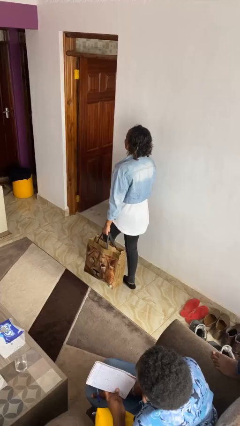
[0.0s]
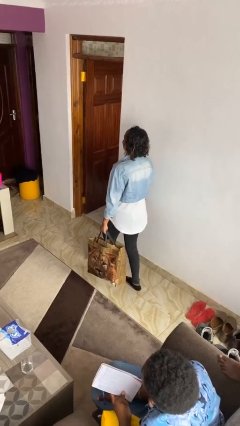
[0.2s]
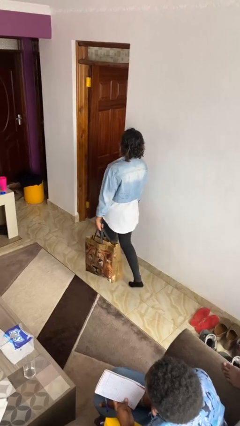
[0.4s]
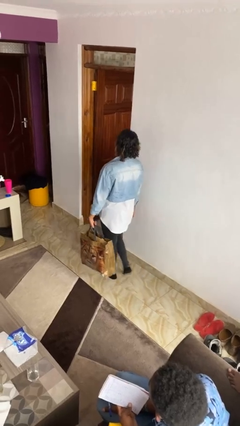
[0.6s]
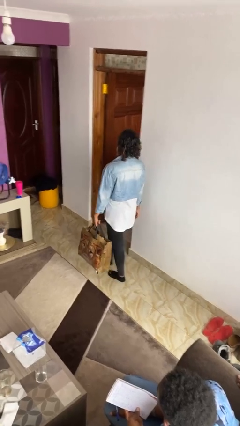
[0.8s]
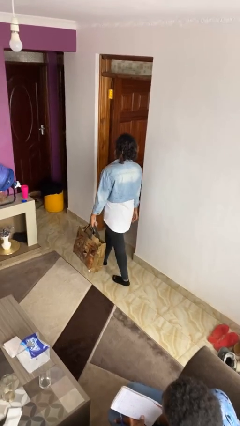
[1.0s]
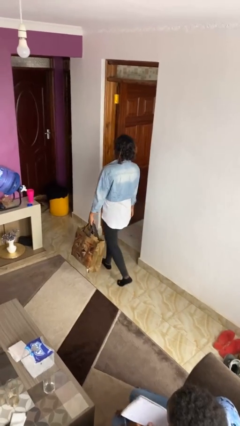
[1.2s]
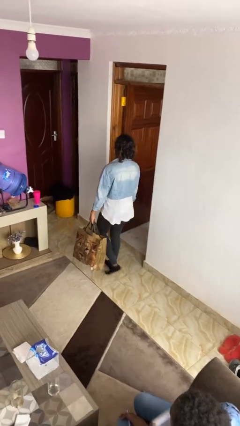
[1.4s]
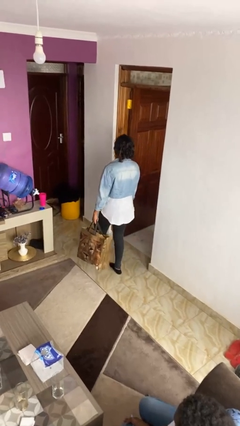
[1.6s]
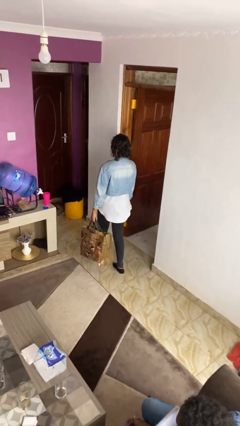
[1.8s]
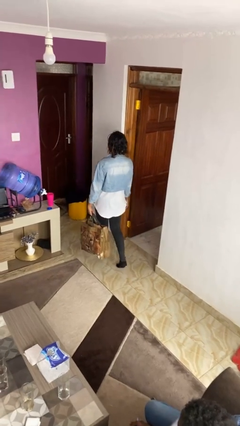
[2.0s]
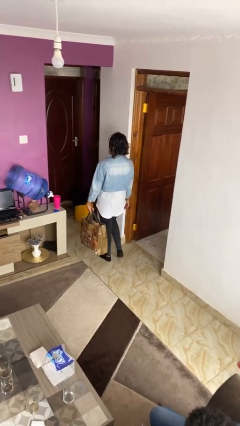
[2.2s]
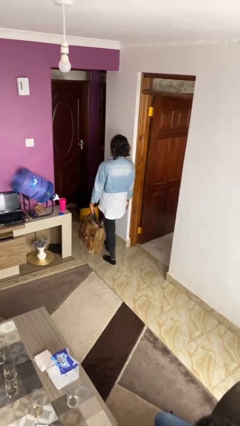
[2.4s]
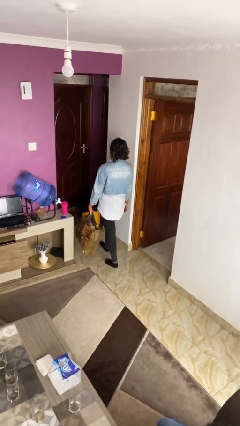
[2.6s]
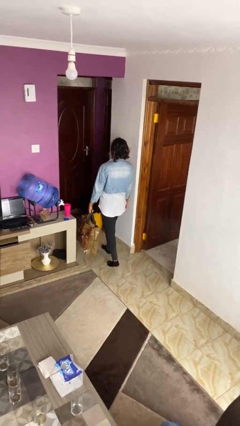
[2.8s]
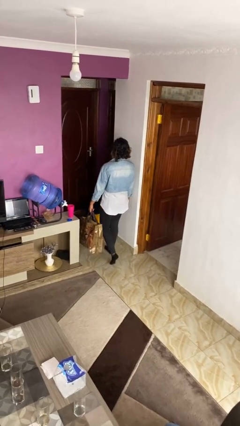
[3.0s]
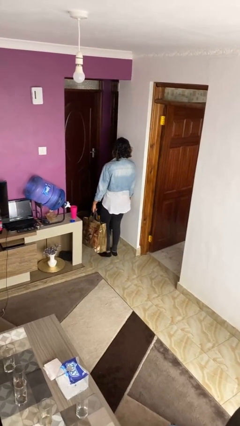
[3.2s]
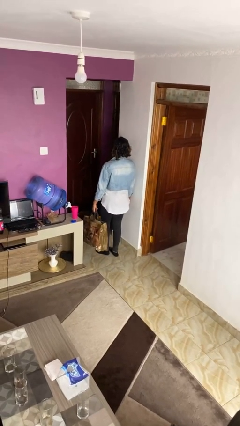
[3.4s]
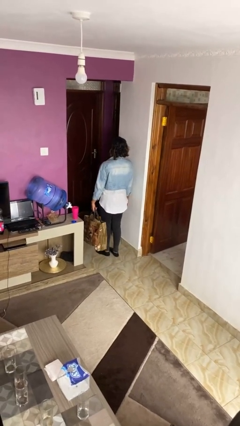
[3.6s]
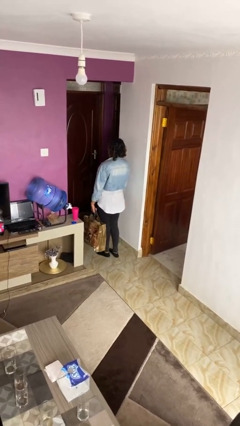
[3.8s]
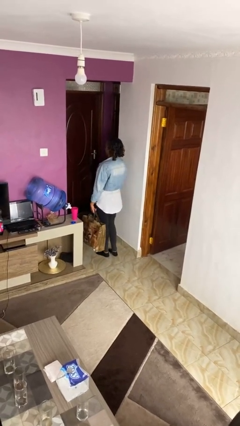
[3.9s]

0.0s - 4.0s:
person carries groceries

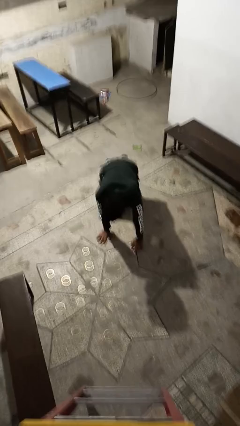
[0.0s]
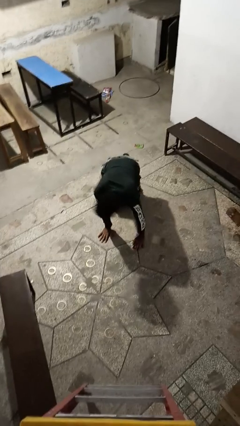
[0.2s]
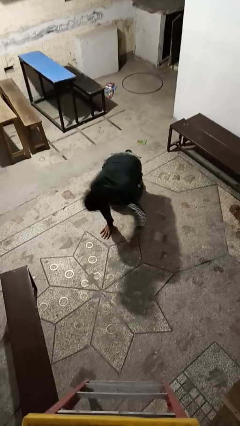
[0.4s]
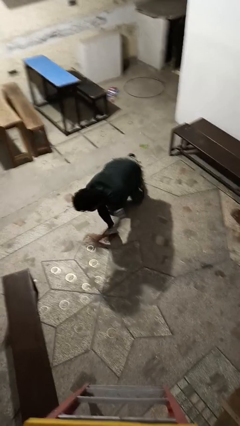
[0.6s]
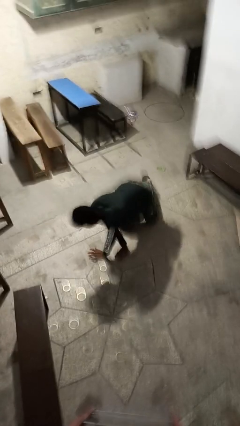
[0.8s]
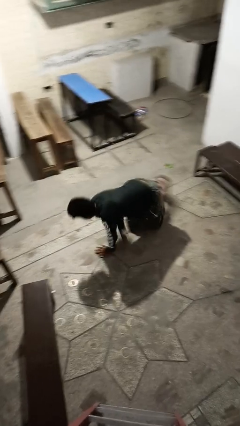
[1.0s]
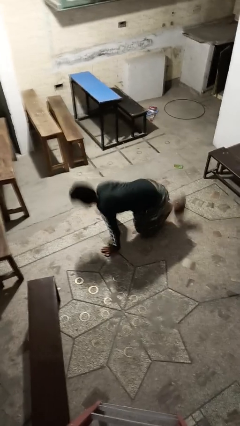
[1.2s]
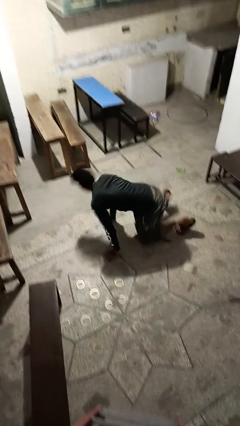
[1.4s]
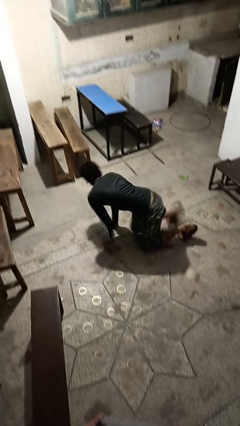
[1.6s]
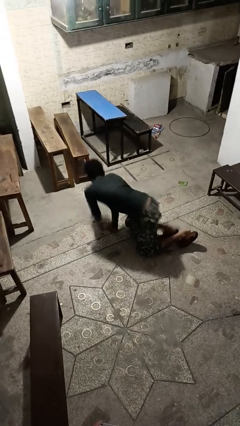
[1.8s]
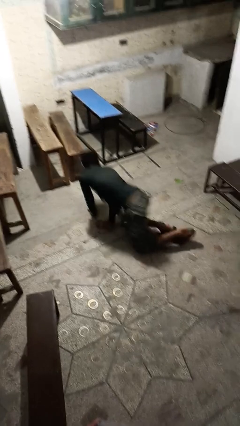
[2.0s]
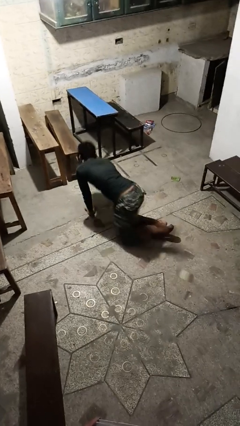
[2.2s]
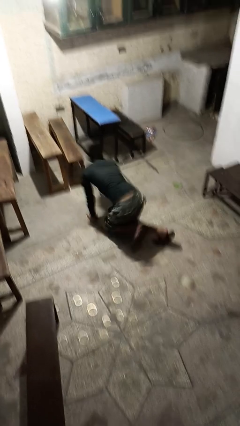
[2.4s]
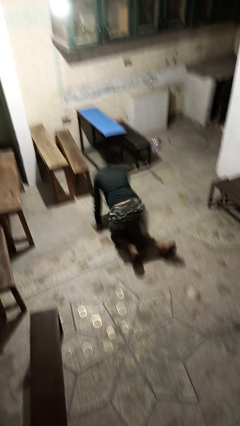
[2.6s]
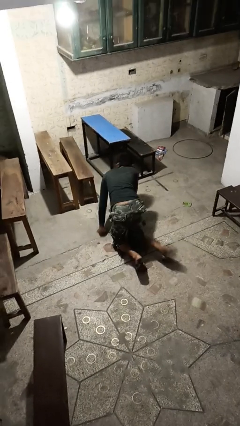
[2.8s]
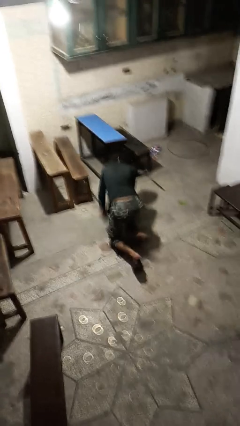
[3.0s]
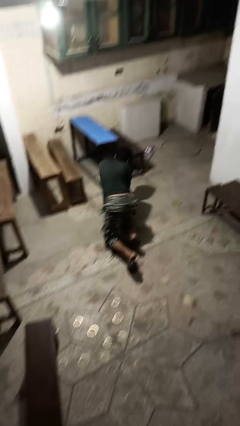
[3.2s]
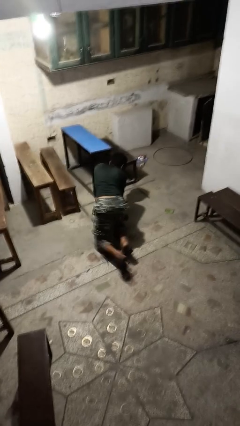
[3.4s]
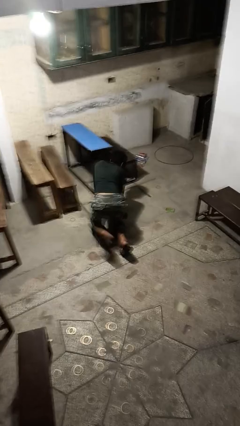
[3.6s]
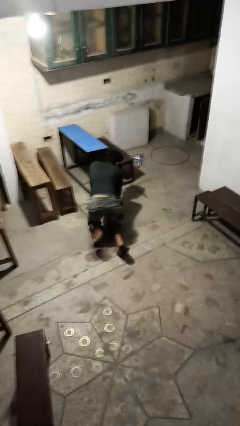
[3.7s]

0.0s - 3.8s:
person crawls

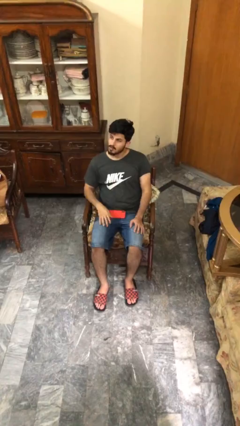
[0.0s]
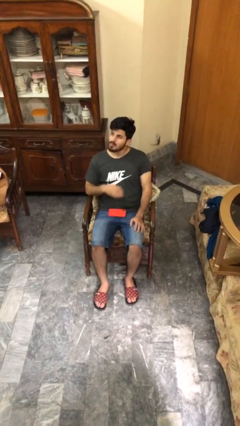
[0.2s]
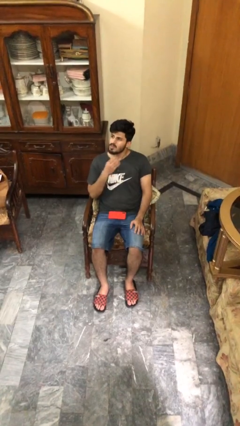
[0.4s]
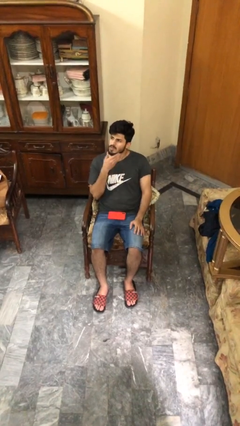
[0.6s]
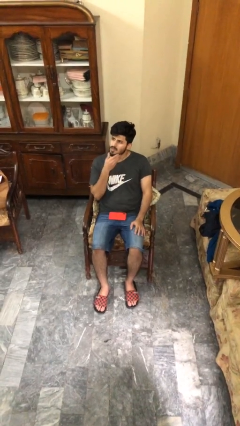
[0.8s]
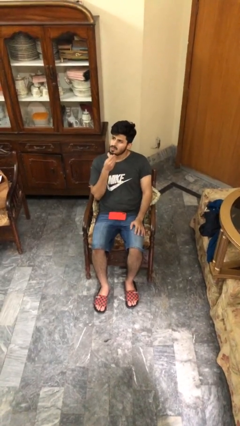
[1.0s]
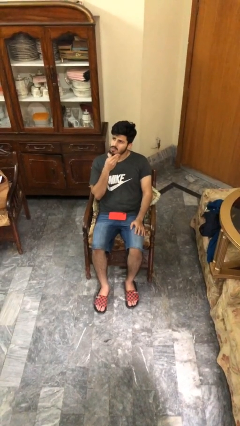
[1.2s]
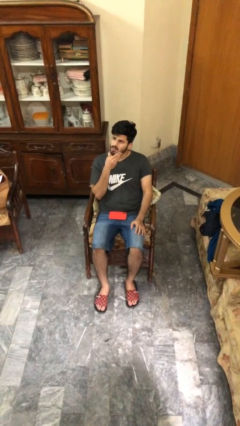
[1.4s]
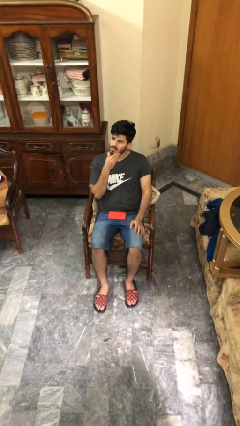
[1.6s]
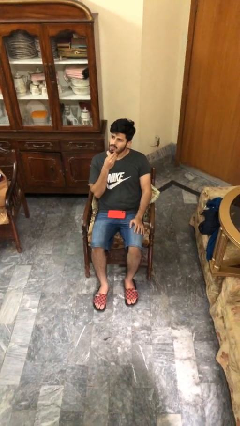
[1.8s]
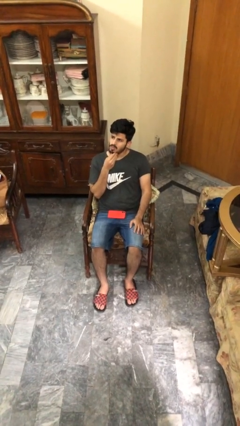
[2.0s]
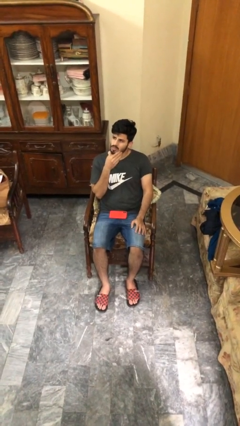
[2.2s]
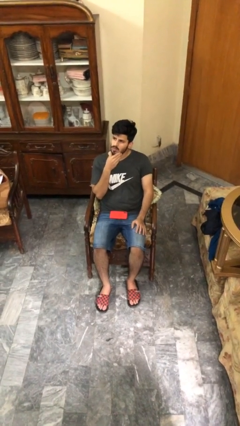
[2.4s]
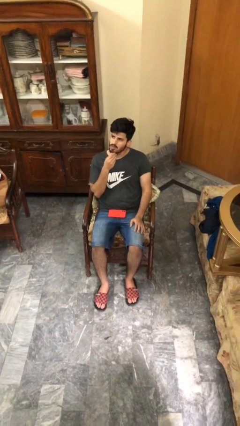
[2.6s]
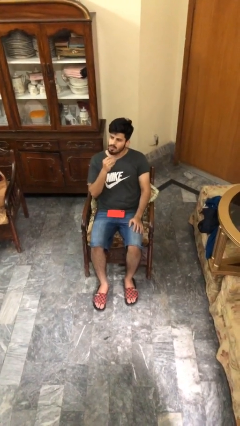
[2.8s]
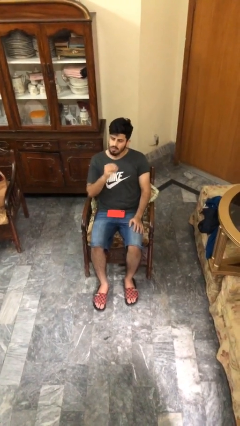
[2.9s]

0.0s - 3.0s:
person strokes chin

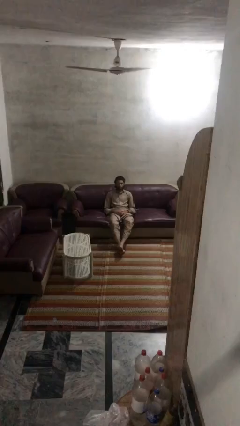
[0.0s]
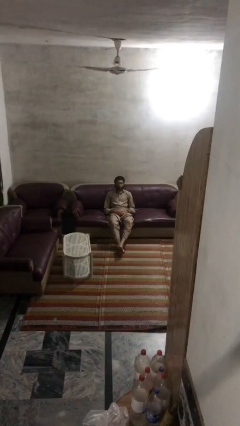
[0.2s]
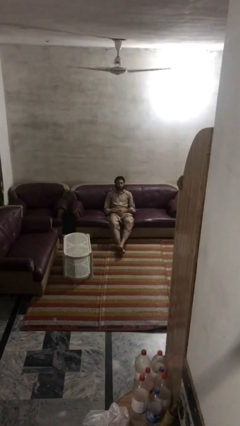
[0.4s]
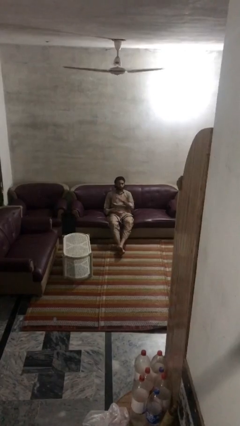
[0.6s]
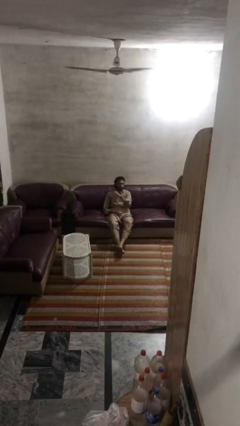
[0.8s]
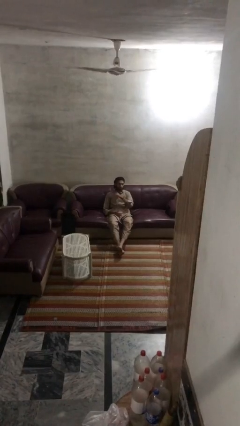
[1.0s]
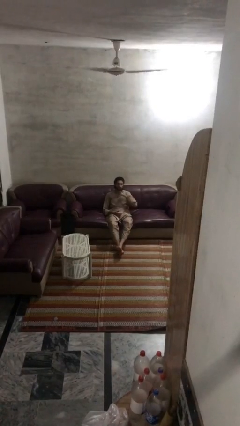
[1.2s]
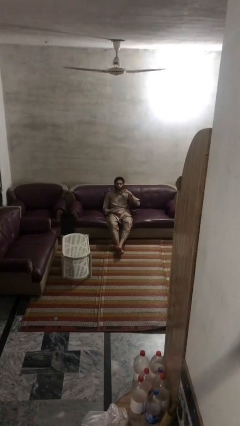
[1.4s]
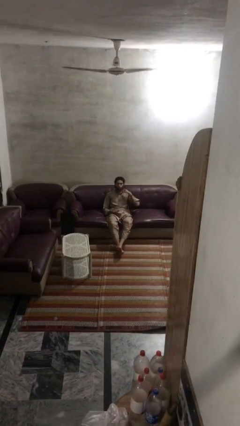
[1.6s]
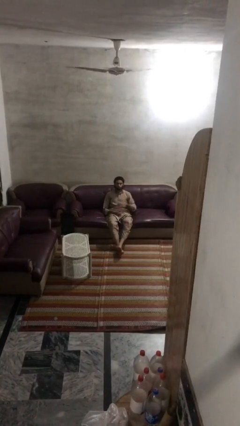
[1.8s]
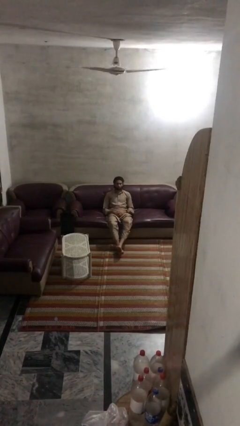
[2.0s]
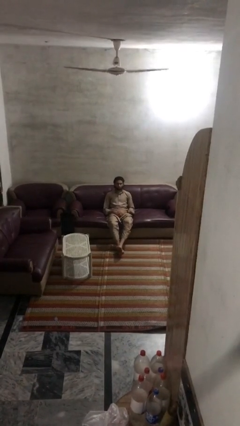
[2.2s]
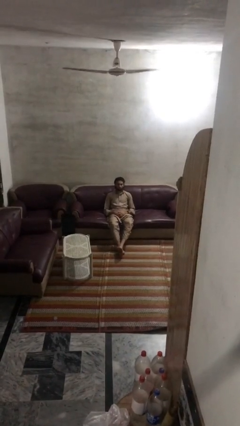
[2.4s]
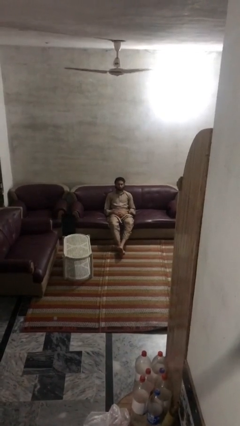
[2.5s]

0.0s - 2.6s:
person gestures cut

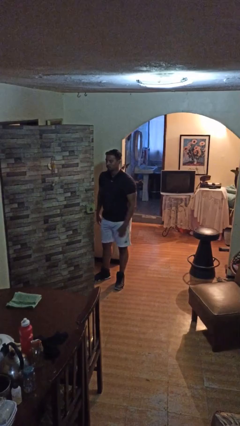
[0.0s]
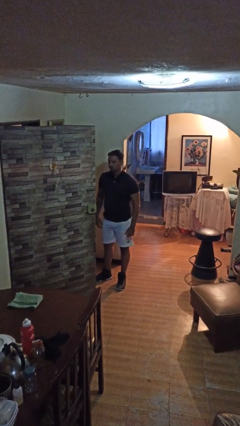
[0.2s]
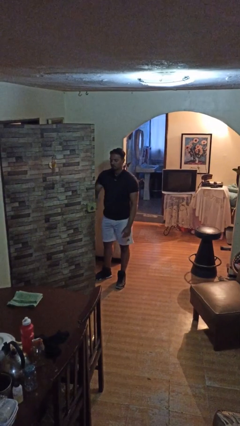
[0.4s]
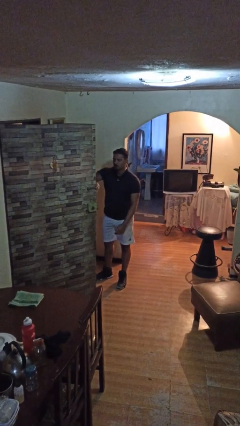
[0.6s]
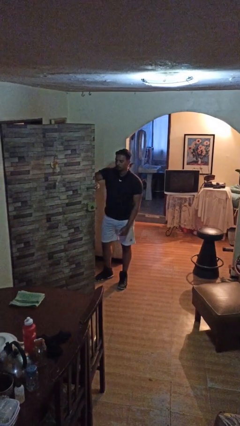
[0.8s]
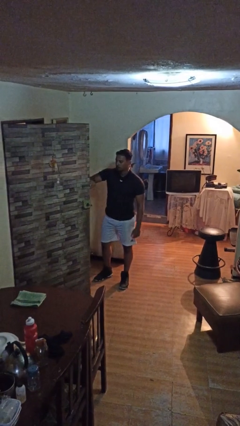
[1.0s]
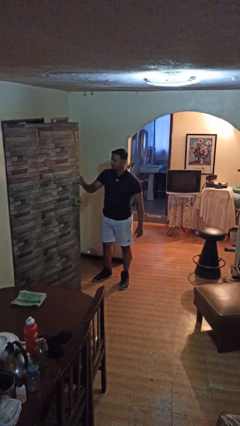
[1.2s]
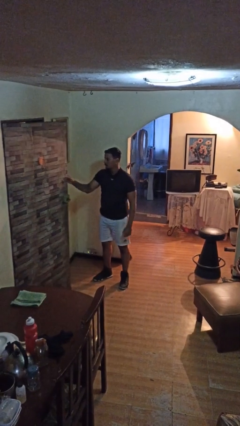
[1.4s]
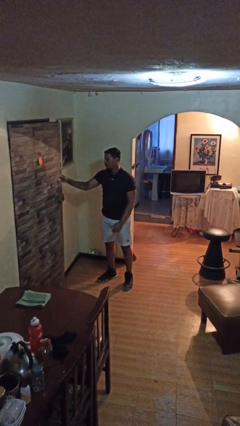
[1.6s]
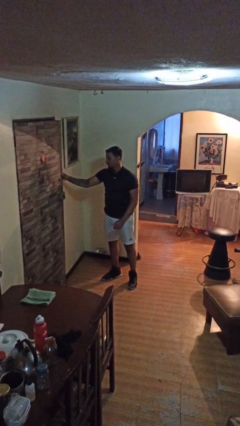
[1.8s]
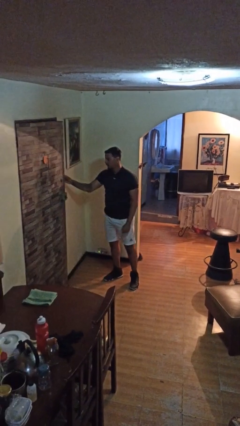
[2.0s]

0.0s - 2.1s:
person closes facility door

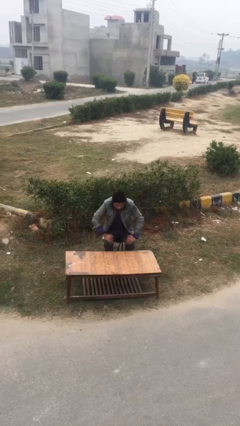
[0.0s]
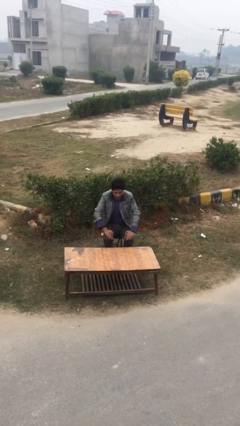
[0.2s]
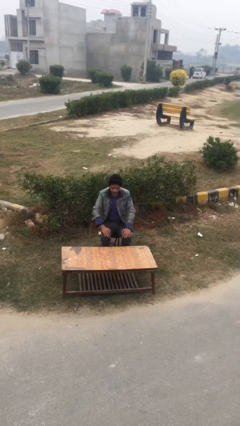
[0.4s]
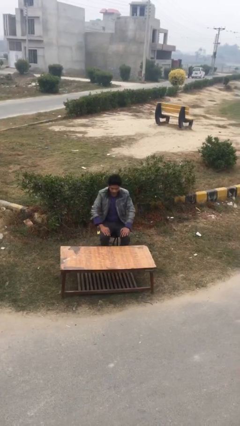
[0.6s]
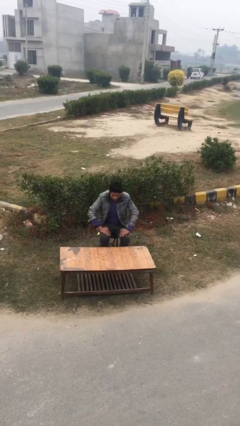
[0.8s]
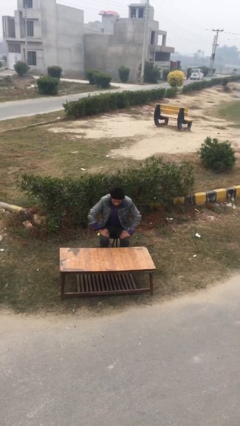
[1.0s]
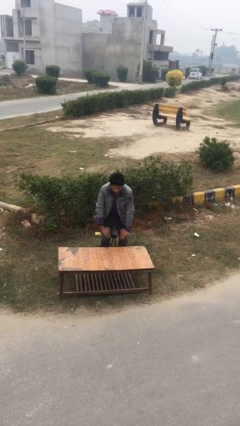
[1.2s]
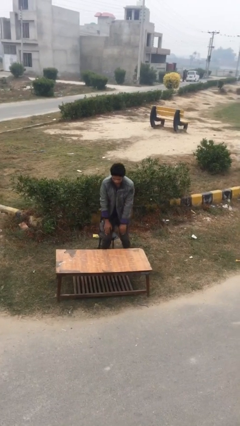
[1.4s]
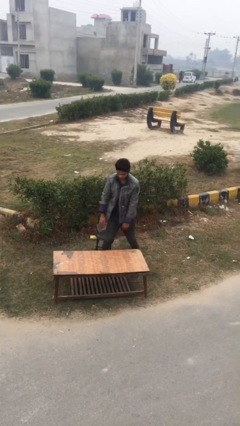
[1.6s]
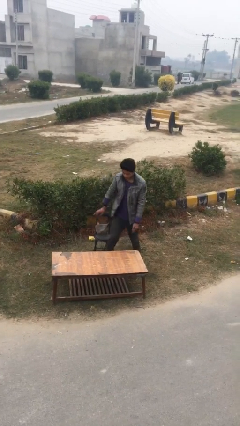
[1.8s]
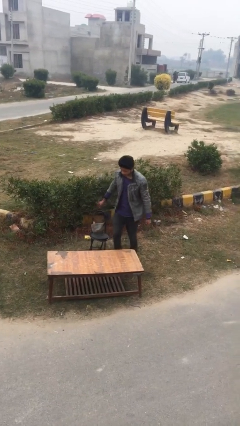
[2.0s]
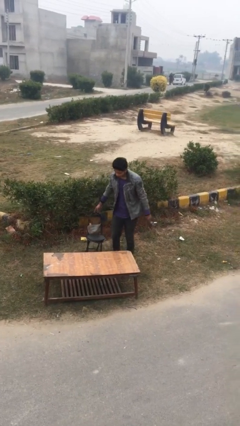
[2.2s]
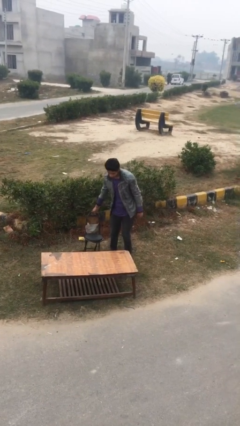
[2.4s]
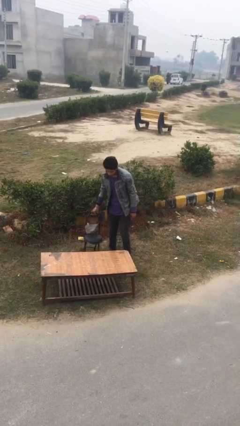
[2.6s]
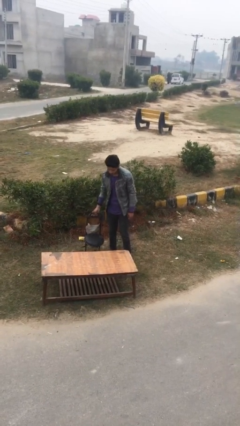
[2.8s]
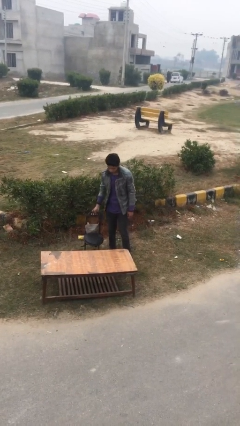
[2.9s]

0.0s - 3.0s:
person stands up
